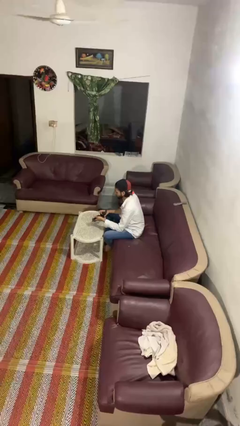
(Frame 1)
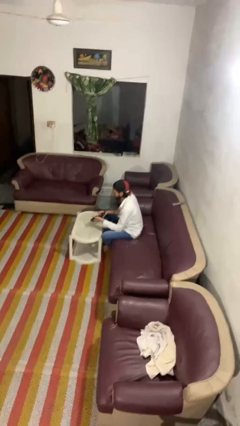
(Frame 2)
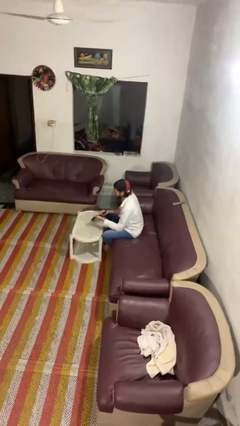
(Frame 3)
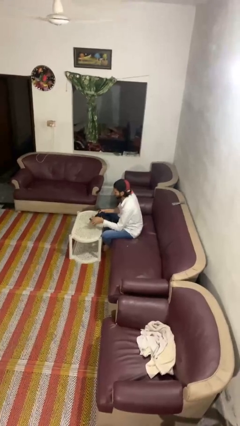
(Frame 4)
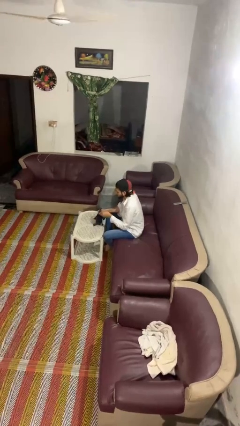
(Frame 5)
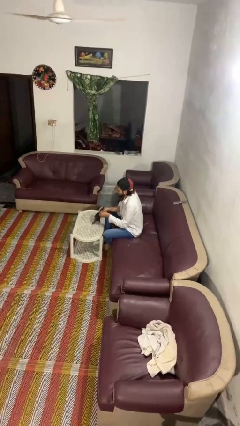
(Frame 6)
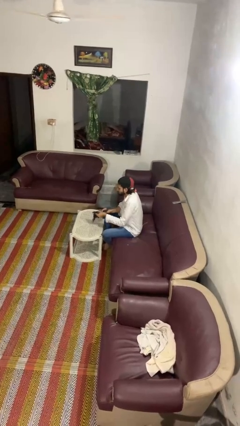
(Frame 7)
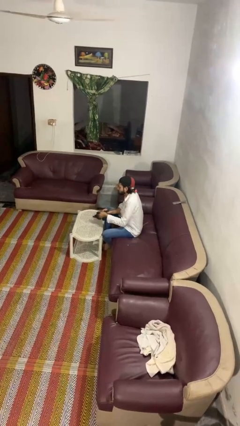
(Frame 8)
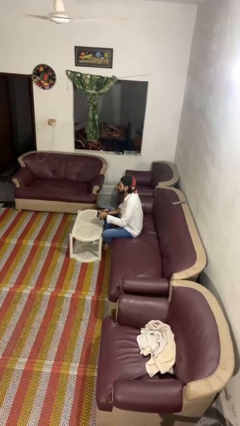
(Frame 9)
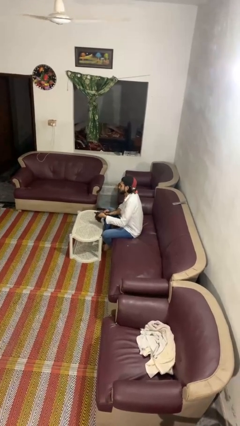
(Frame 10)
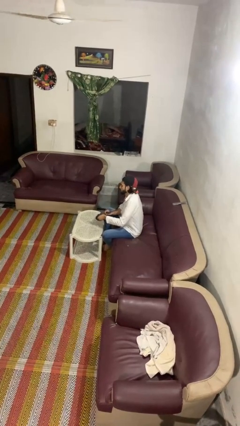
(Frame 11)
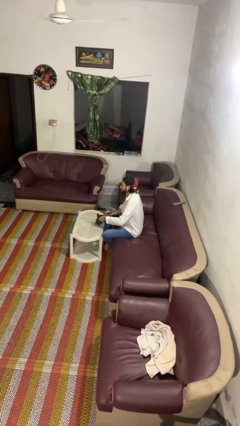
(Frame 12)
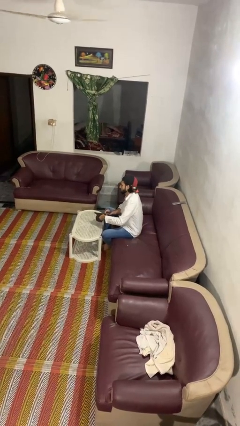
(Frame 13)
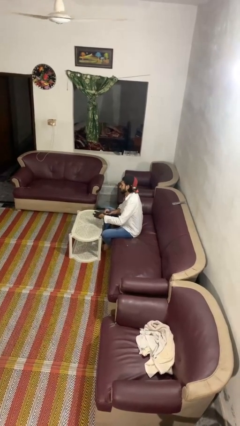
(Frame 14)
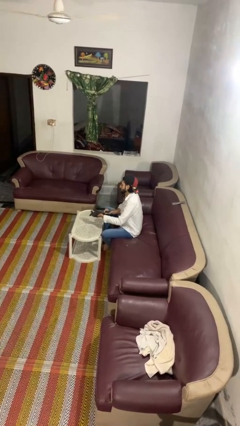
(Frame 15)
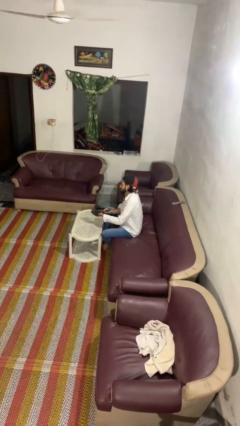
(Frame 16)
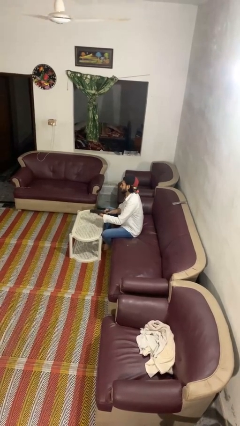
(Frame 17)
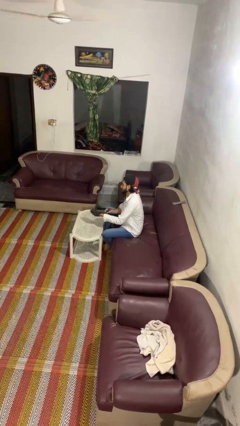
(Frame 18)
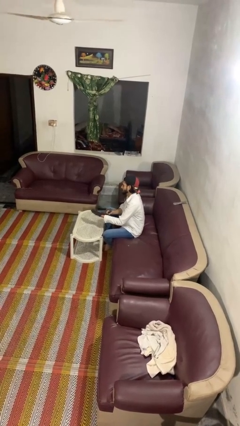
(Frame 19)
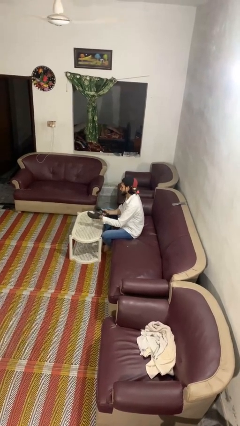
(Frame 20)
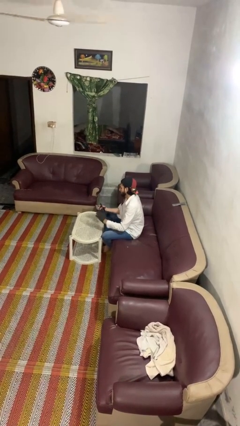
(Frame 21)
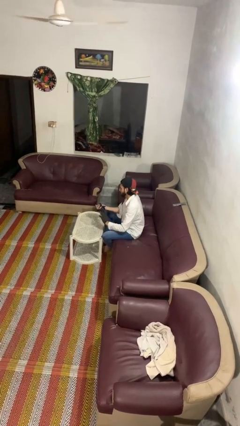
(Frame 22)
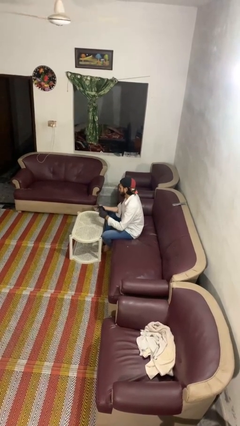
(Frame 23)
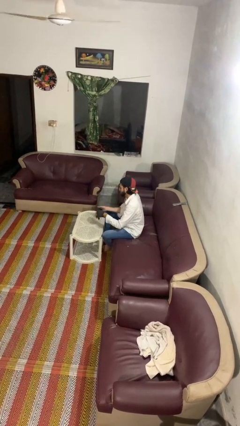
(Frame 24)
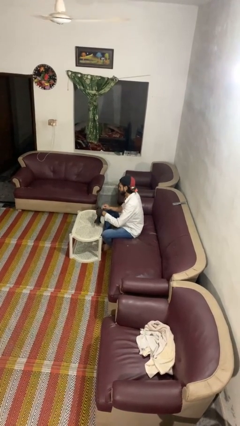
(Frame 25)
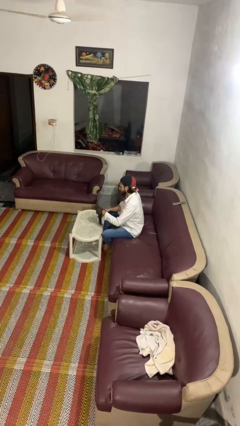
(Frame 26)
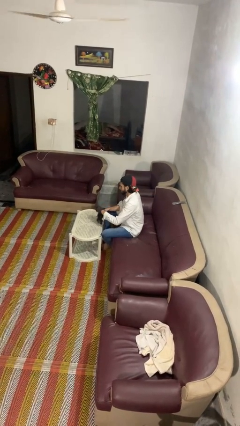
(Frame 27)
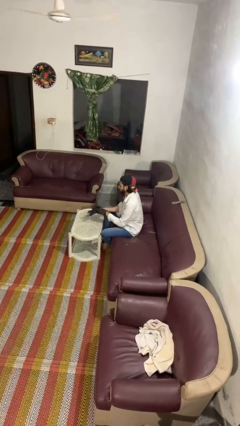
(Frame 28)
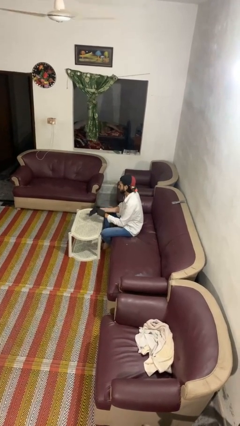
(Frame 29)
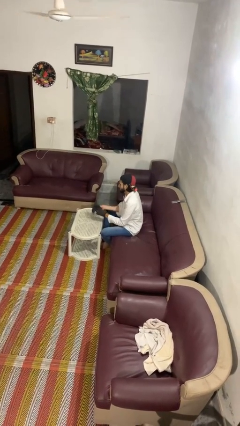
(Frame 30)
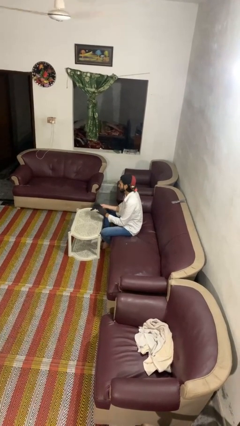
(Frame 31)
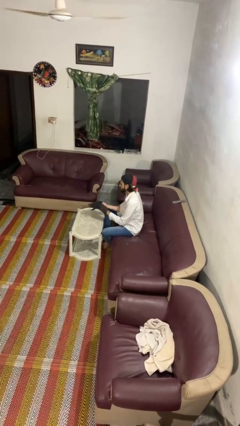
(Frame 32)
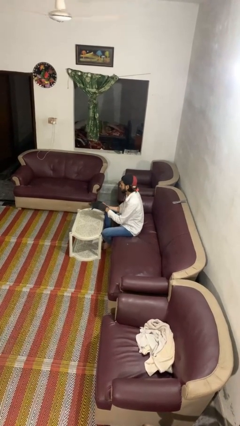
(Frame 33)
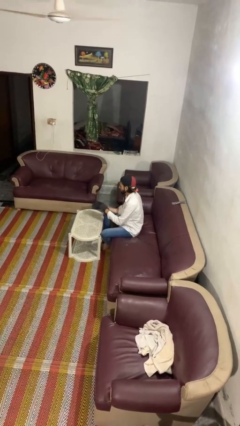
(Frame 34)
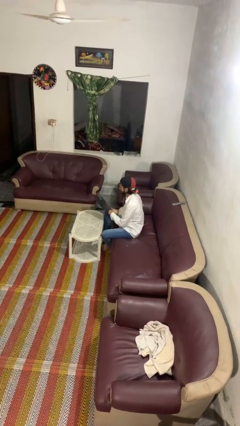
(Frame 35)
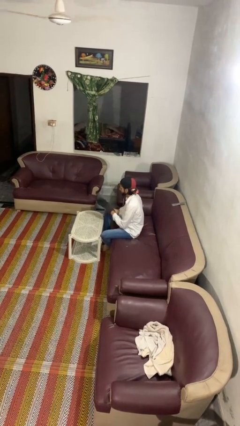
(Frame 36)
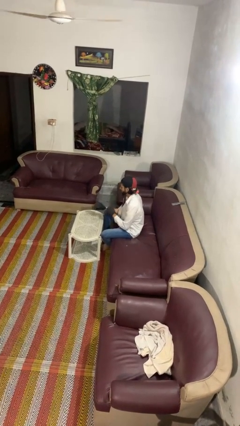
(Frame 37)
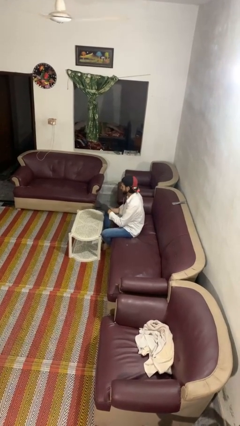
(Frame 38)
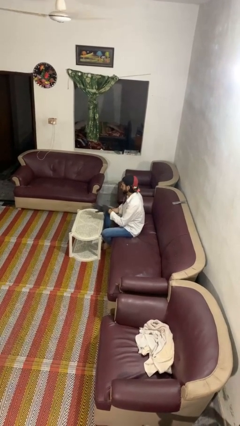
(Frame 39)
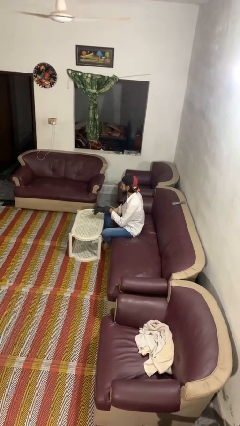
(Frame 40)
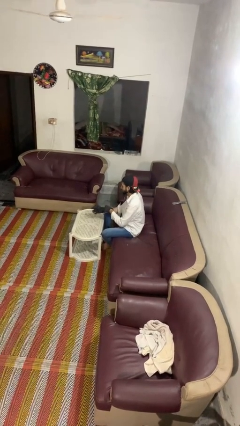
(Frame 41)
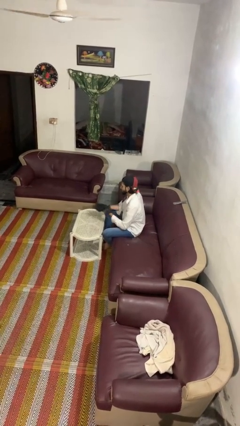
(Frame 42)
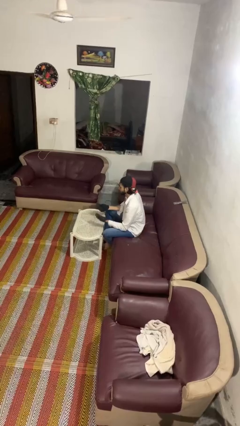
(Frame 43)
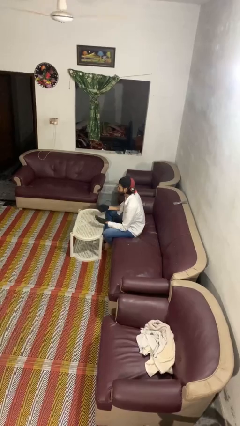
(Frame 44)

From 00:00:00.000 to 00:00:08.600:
person puts on gloves

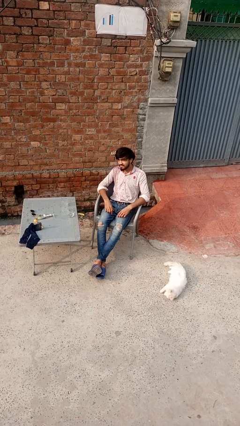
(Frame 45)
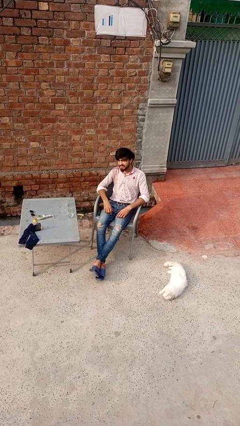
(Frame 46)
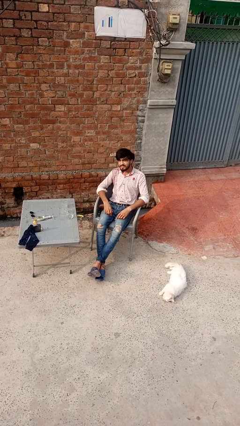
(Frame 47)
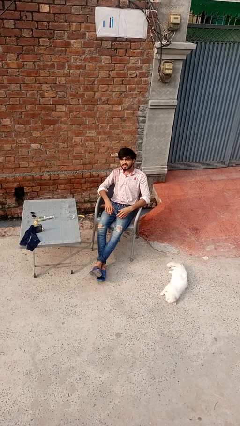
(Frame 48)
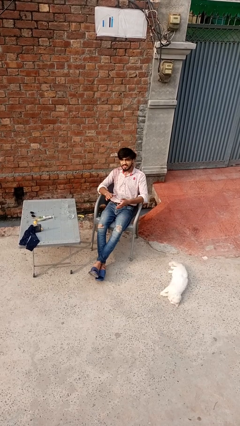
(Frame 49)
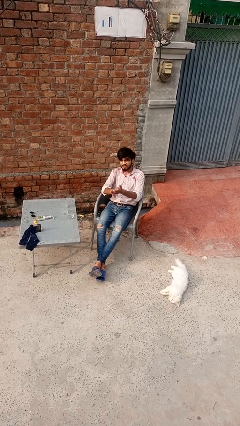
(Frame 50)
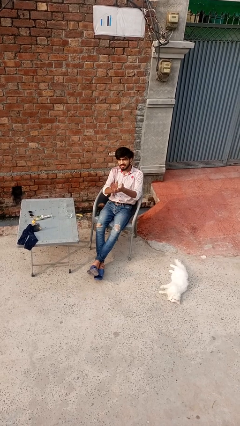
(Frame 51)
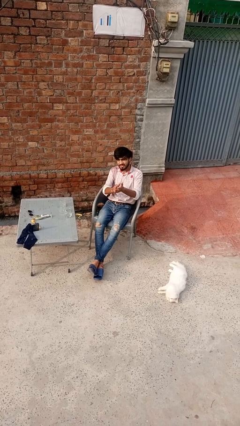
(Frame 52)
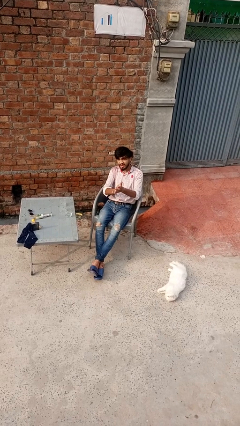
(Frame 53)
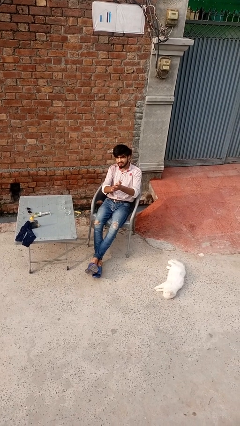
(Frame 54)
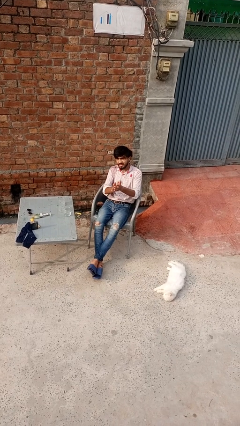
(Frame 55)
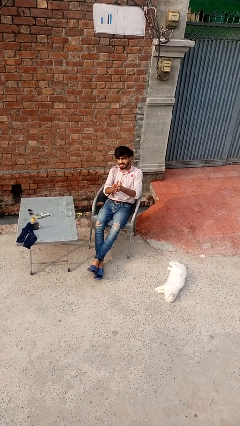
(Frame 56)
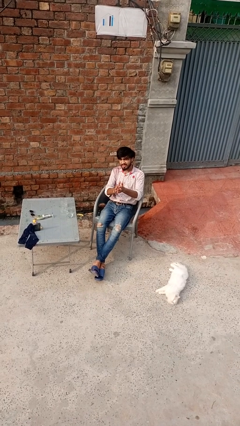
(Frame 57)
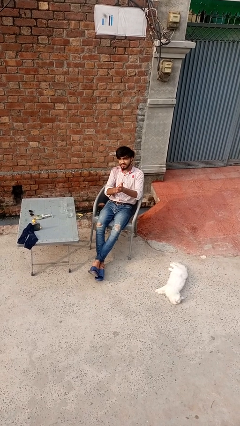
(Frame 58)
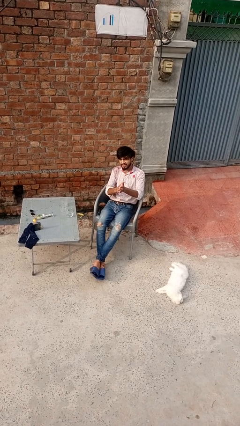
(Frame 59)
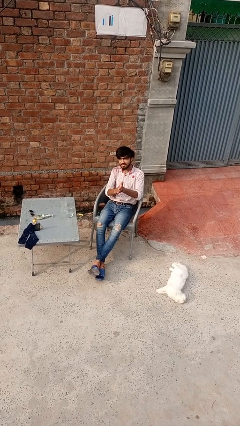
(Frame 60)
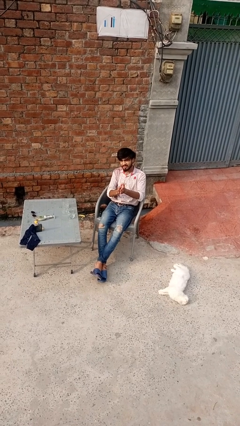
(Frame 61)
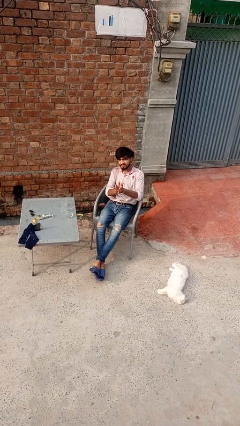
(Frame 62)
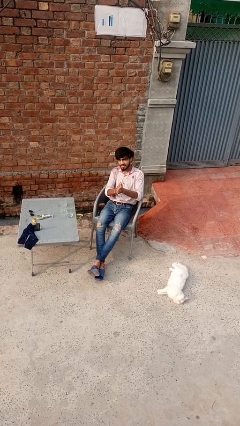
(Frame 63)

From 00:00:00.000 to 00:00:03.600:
person claps hands

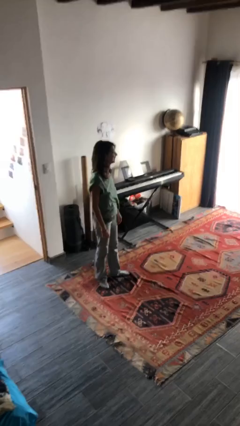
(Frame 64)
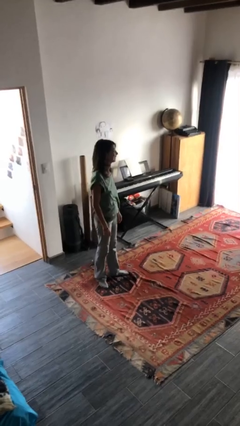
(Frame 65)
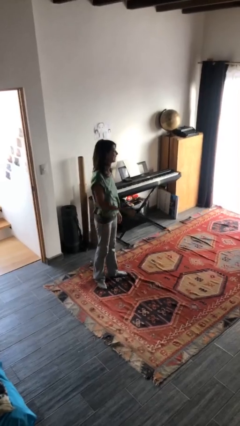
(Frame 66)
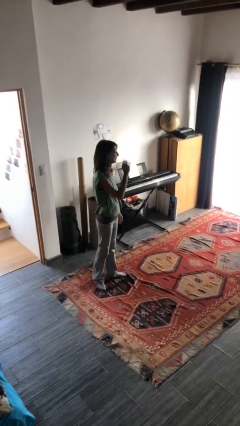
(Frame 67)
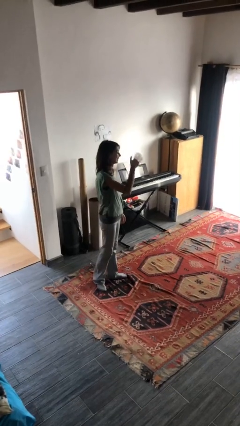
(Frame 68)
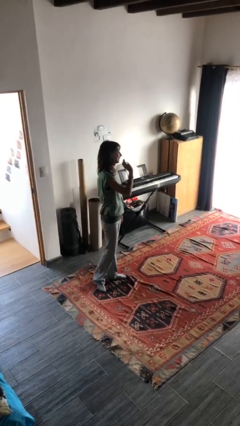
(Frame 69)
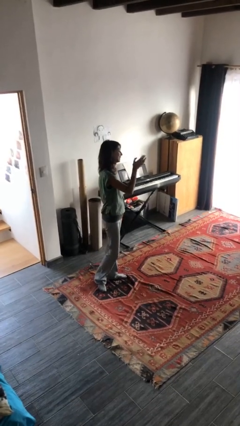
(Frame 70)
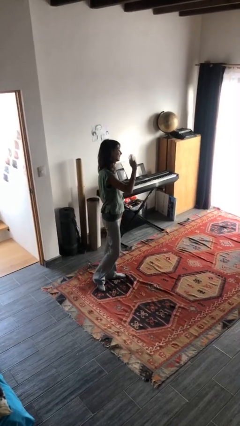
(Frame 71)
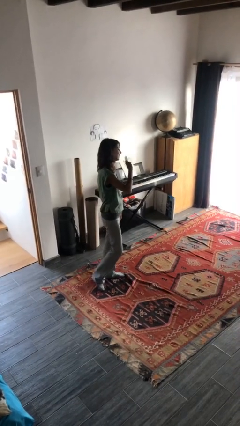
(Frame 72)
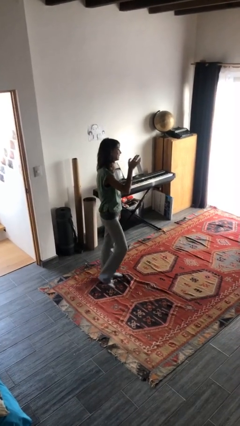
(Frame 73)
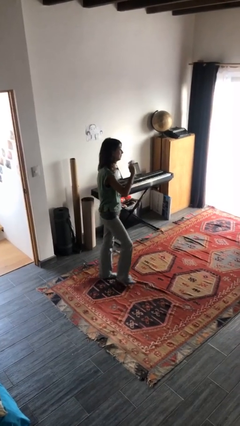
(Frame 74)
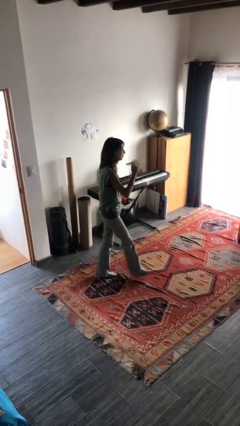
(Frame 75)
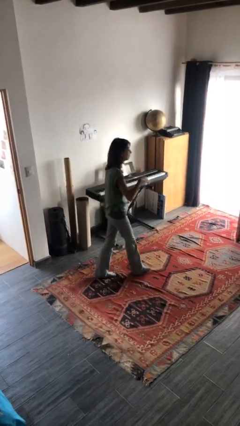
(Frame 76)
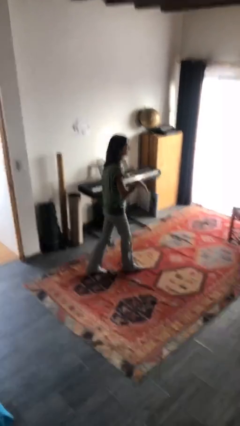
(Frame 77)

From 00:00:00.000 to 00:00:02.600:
person waves at person

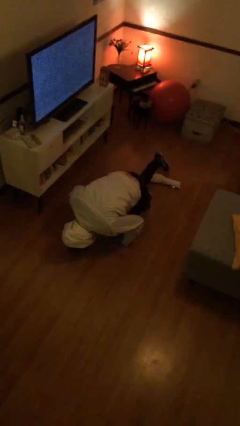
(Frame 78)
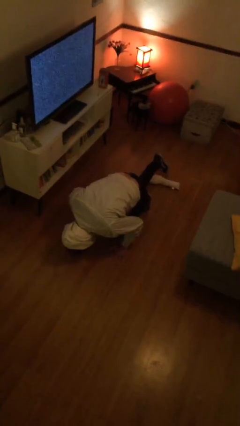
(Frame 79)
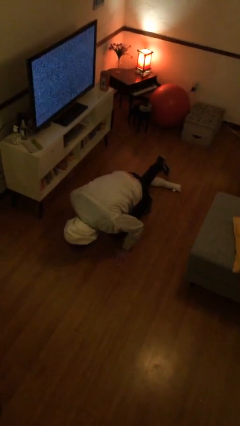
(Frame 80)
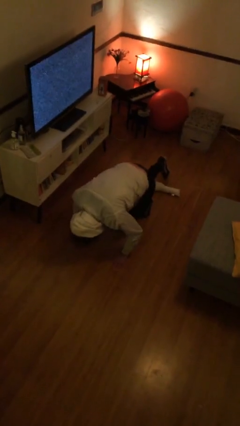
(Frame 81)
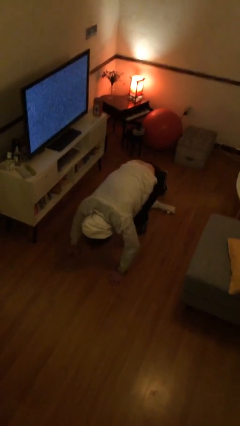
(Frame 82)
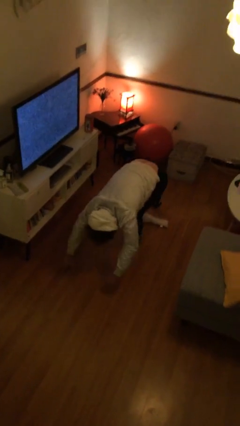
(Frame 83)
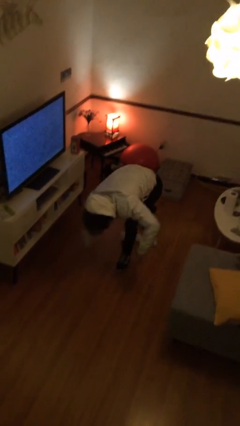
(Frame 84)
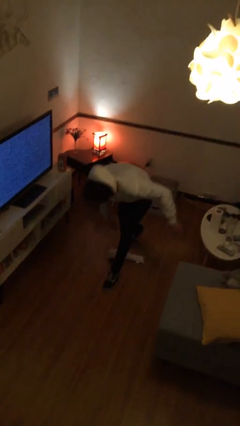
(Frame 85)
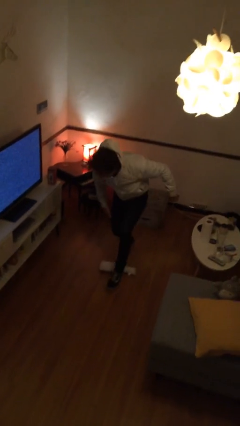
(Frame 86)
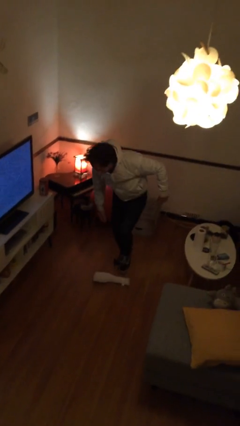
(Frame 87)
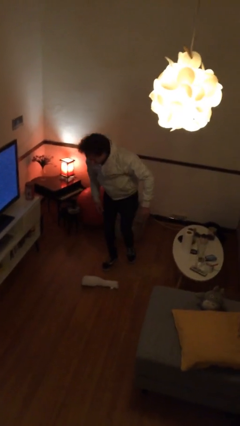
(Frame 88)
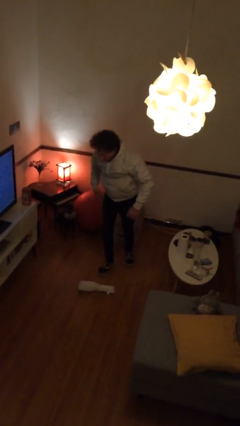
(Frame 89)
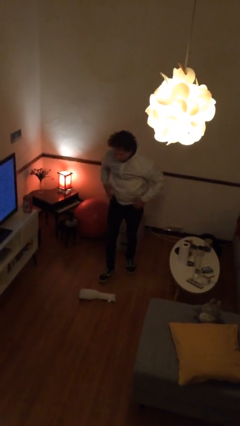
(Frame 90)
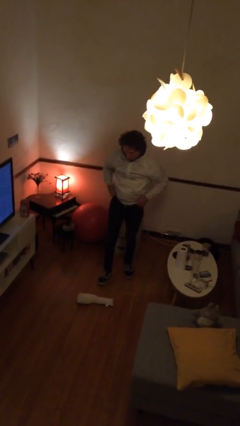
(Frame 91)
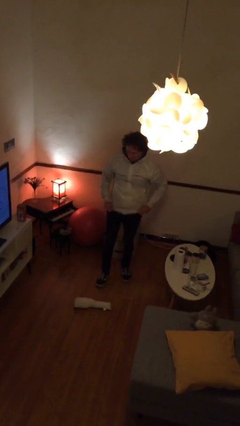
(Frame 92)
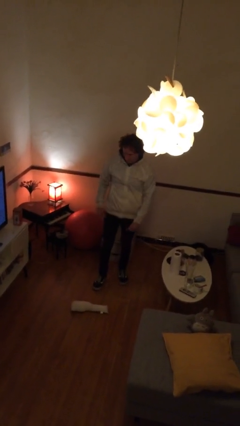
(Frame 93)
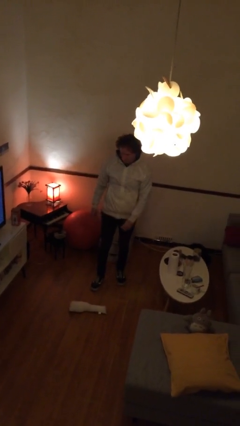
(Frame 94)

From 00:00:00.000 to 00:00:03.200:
person stands up from floor
